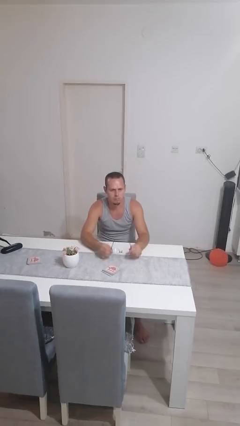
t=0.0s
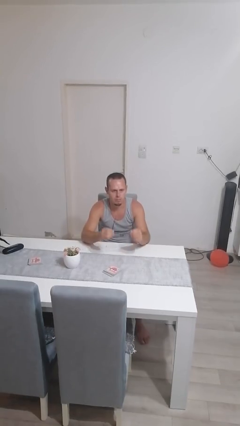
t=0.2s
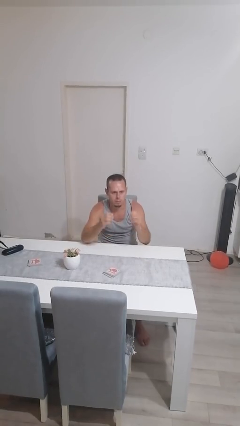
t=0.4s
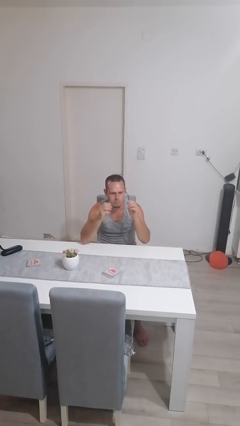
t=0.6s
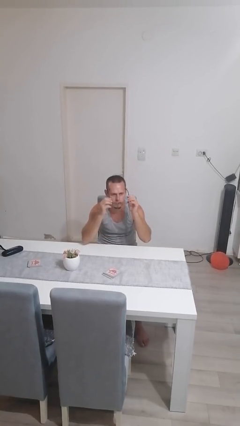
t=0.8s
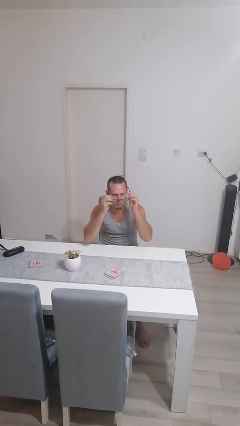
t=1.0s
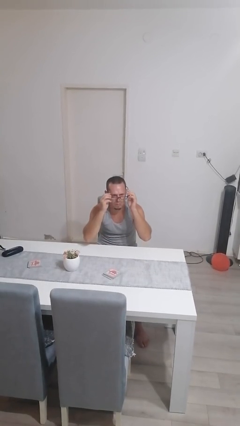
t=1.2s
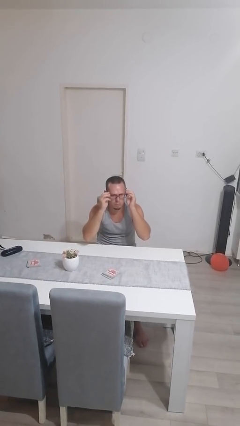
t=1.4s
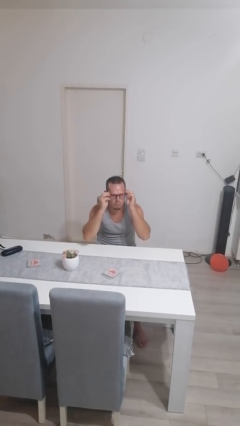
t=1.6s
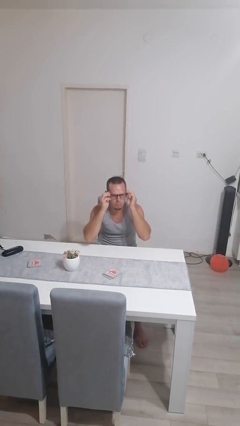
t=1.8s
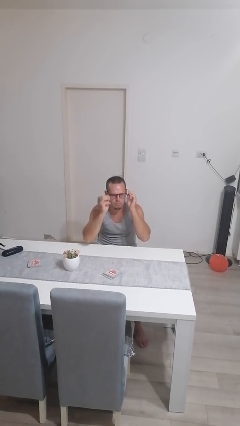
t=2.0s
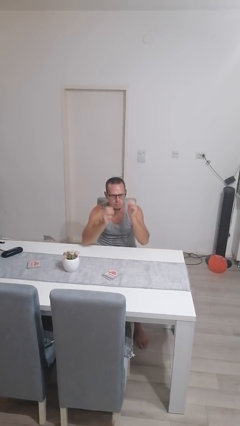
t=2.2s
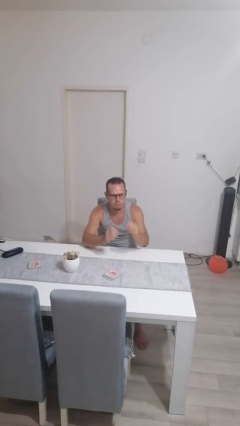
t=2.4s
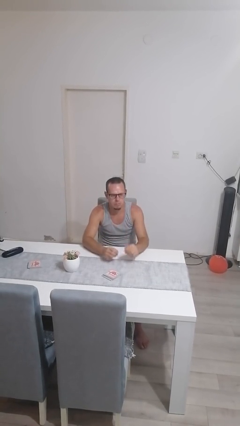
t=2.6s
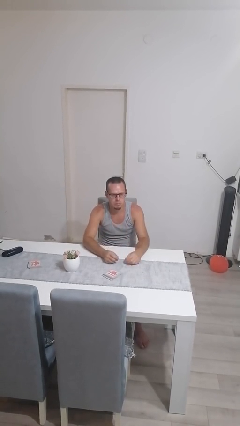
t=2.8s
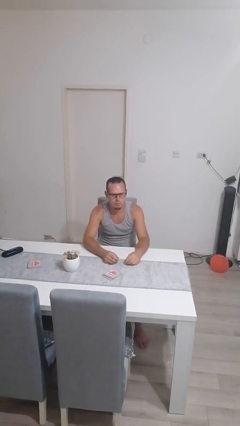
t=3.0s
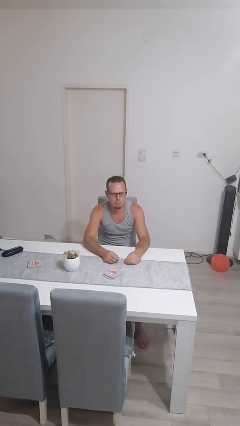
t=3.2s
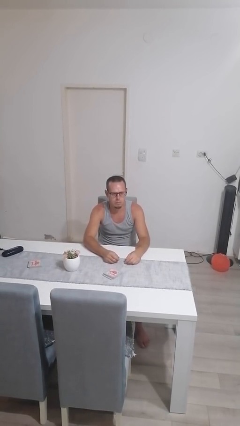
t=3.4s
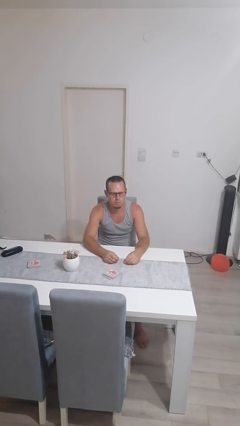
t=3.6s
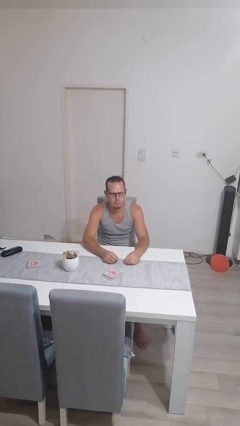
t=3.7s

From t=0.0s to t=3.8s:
person puts on glasses

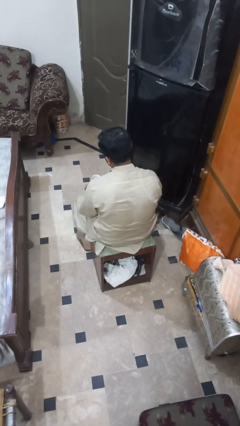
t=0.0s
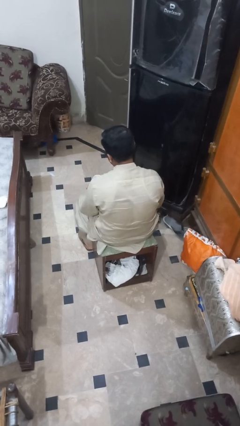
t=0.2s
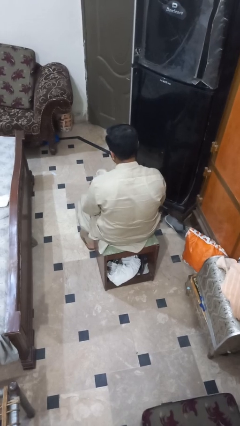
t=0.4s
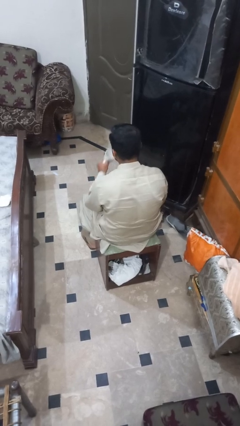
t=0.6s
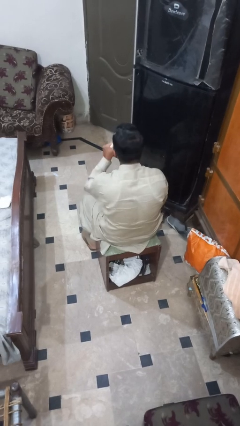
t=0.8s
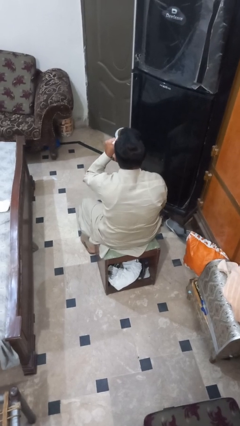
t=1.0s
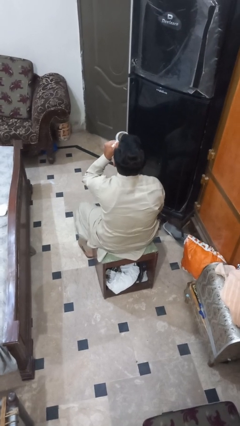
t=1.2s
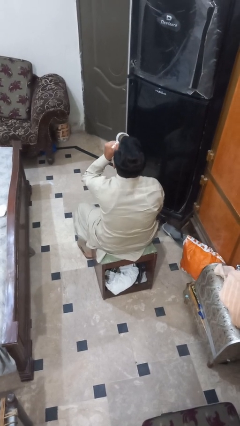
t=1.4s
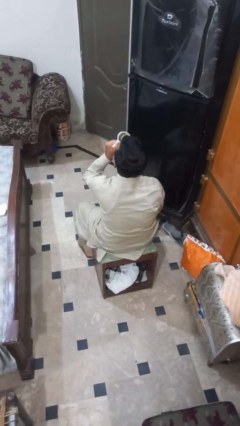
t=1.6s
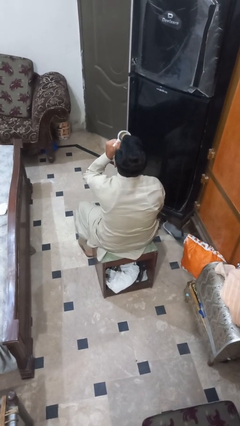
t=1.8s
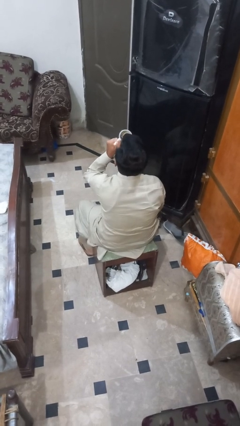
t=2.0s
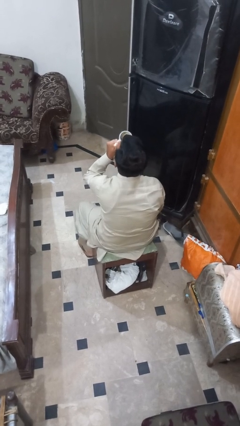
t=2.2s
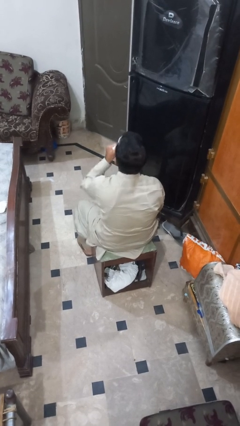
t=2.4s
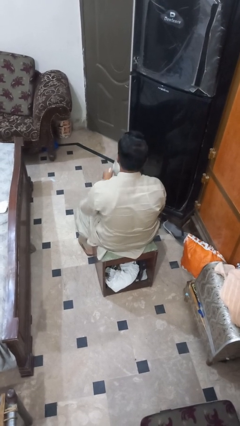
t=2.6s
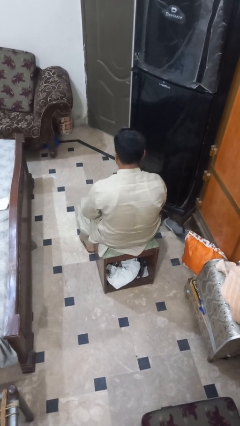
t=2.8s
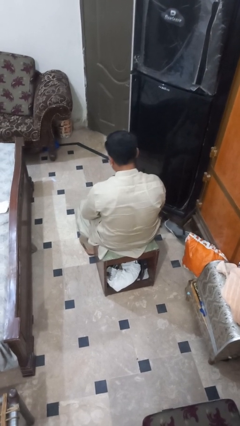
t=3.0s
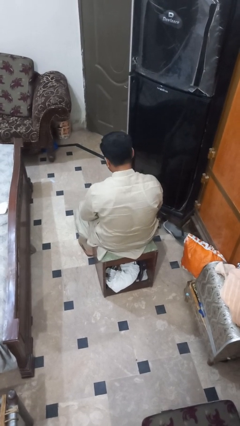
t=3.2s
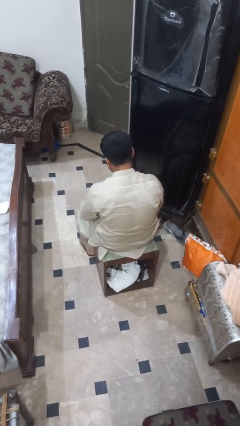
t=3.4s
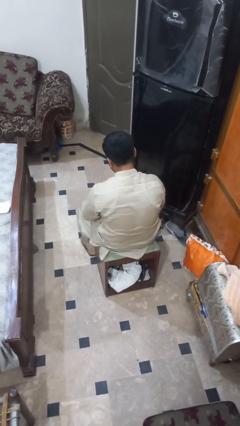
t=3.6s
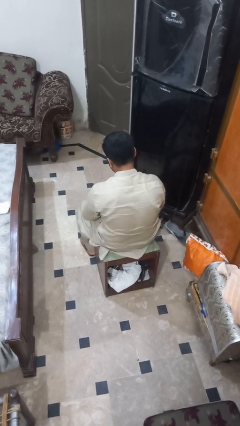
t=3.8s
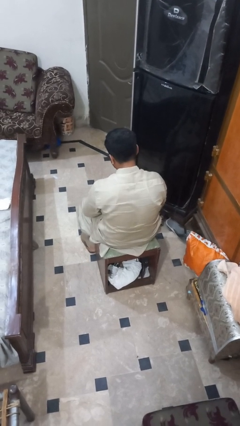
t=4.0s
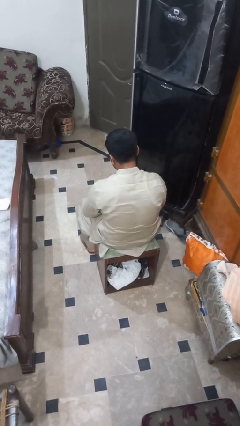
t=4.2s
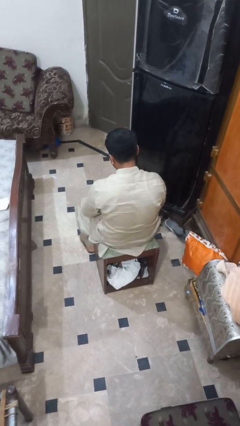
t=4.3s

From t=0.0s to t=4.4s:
person drinks from mug

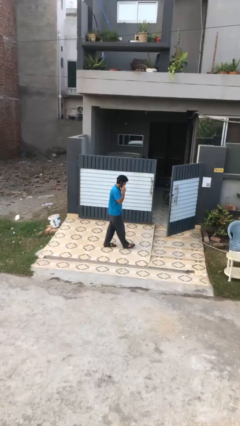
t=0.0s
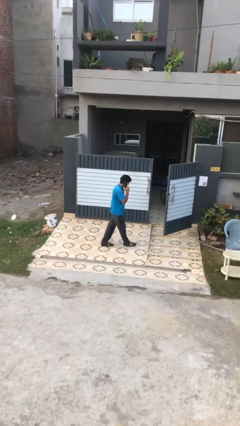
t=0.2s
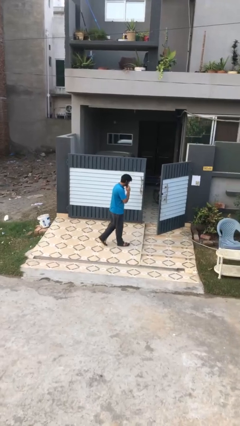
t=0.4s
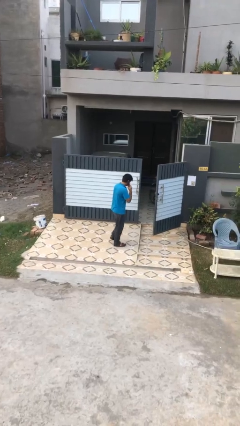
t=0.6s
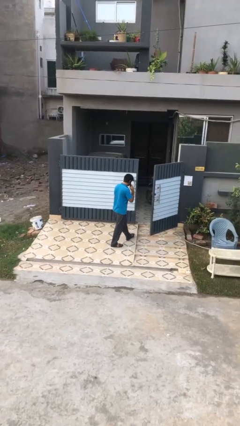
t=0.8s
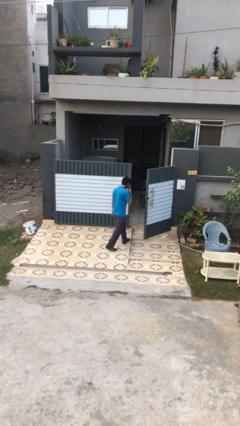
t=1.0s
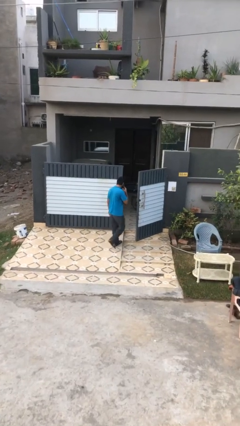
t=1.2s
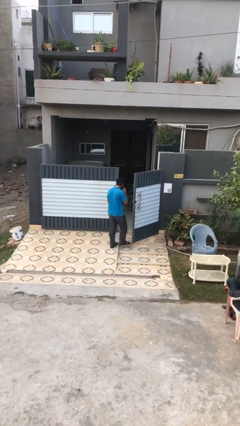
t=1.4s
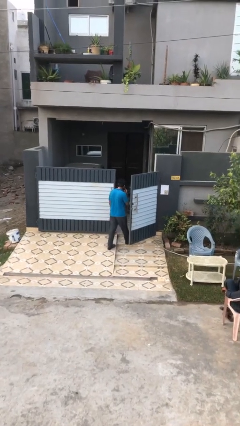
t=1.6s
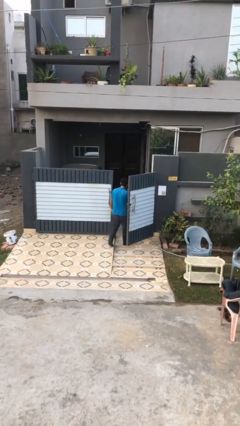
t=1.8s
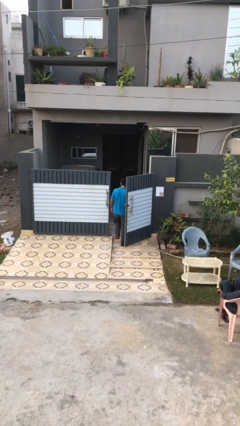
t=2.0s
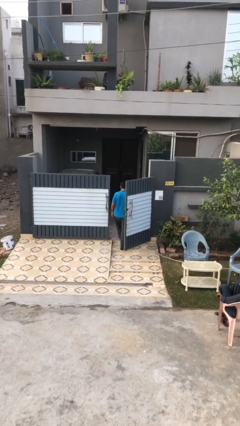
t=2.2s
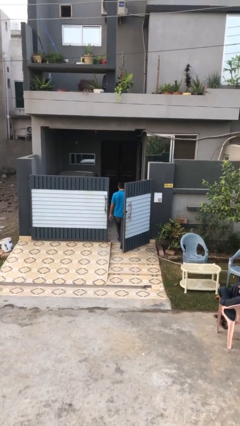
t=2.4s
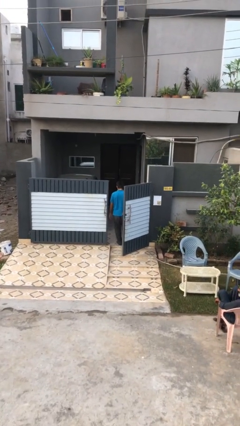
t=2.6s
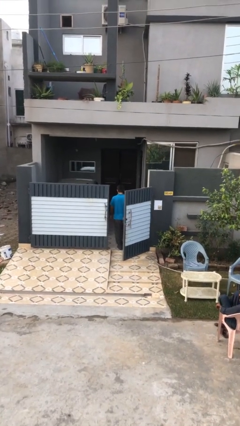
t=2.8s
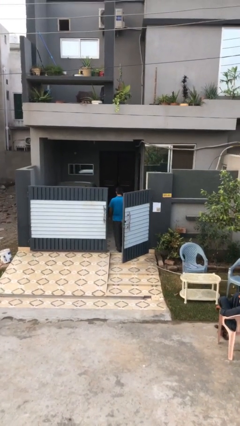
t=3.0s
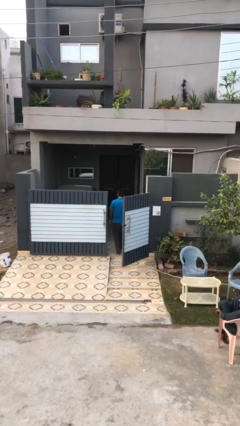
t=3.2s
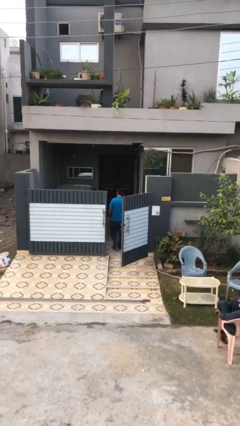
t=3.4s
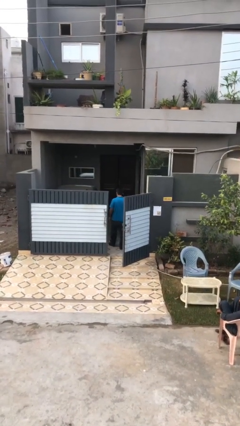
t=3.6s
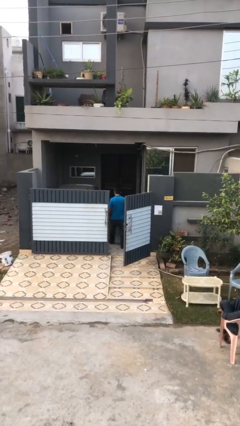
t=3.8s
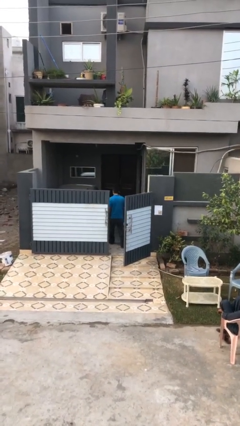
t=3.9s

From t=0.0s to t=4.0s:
person exits scene through structure

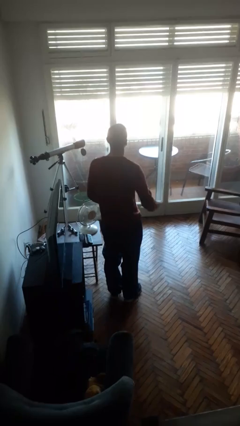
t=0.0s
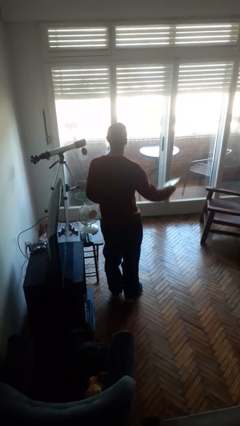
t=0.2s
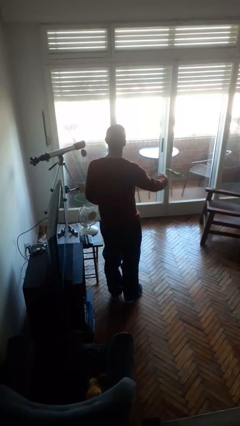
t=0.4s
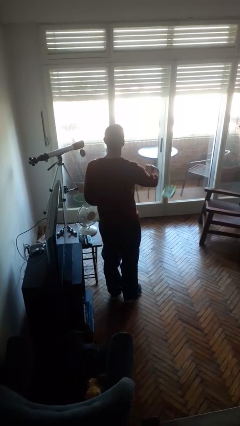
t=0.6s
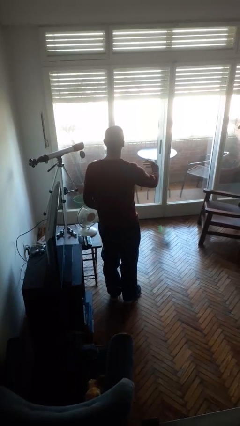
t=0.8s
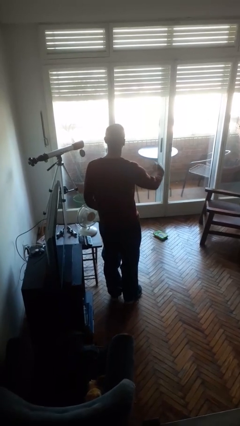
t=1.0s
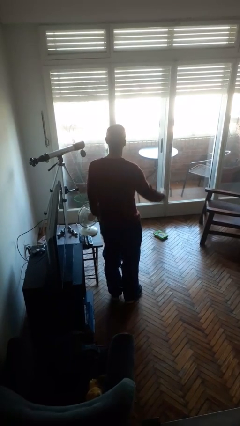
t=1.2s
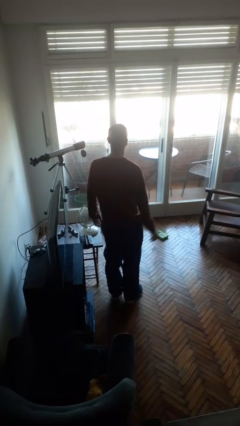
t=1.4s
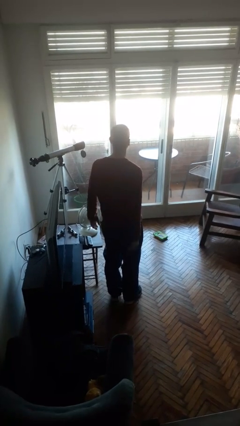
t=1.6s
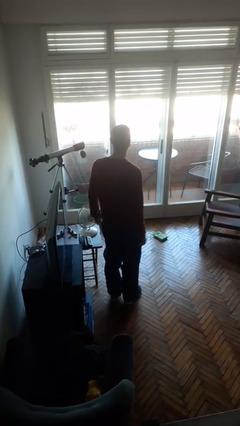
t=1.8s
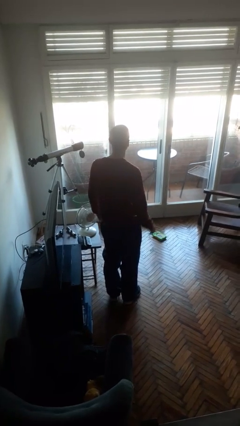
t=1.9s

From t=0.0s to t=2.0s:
person throws object to ground

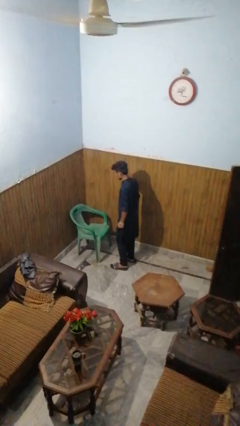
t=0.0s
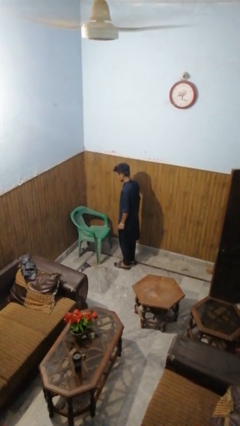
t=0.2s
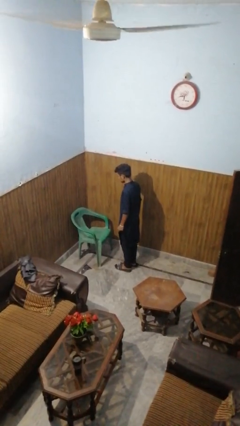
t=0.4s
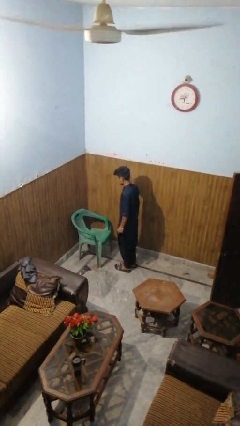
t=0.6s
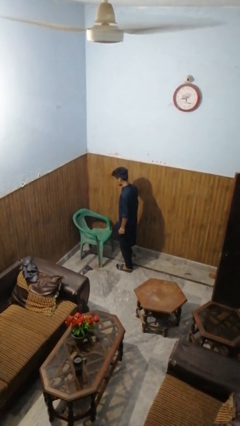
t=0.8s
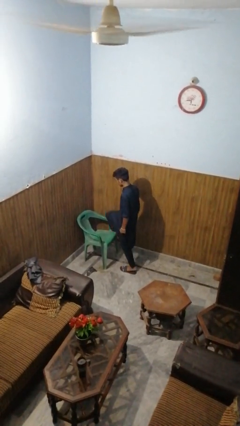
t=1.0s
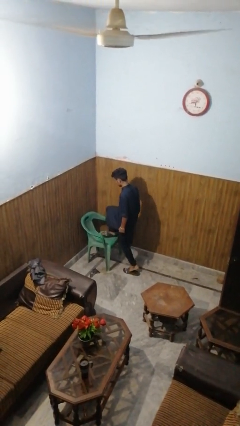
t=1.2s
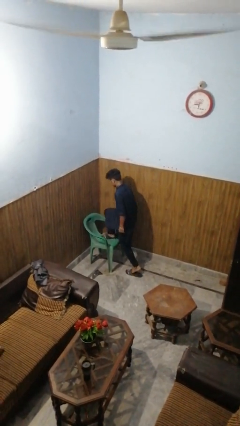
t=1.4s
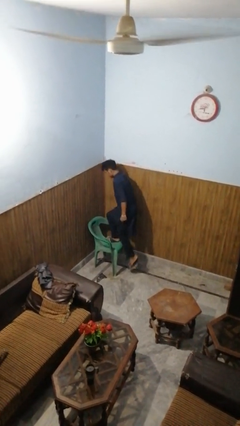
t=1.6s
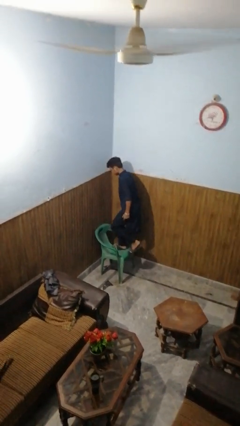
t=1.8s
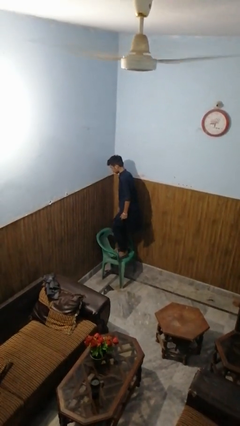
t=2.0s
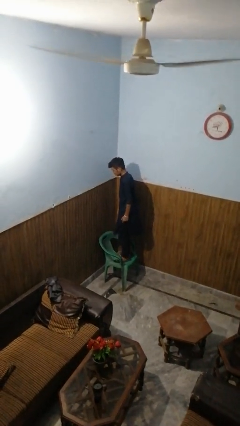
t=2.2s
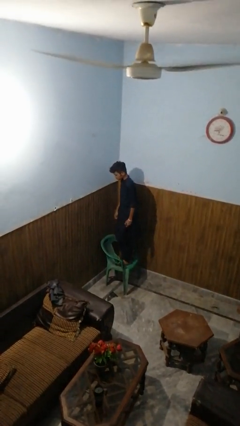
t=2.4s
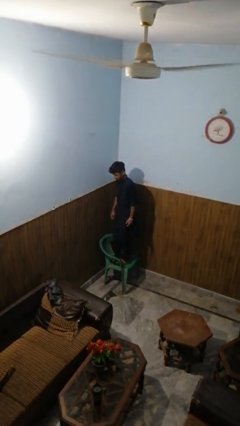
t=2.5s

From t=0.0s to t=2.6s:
person climbs on chair

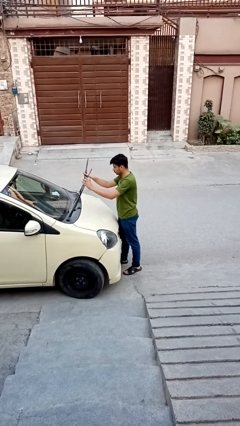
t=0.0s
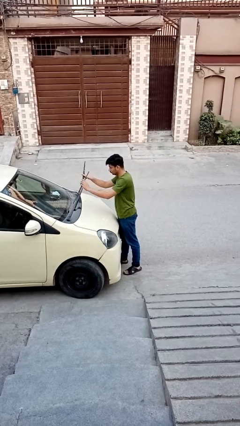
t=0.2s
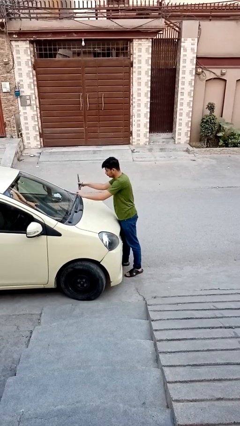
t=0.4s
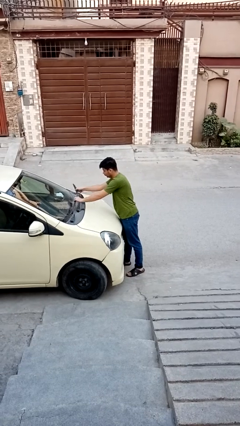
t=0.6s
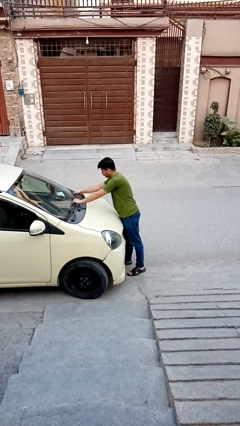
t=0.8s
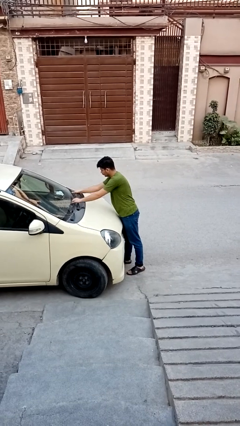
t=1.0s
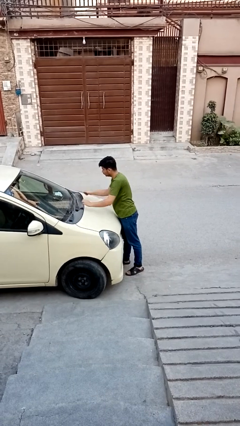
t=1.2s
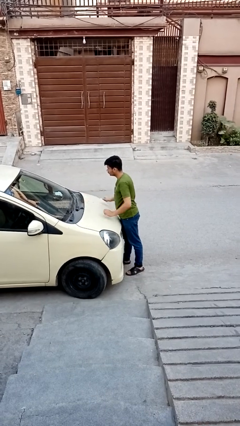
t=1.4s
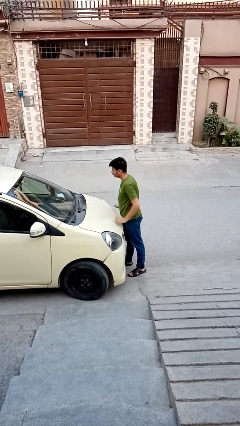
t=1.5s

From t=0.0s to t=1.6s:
person flips down car wipers
